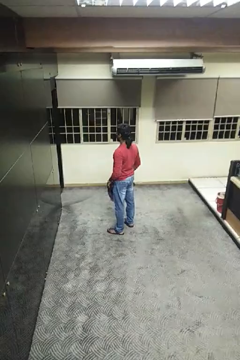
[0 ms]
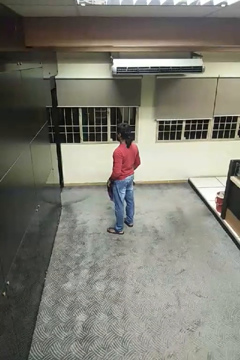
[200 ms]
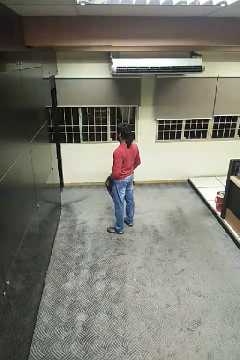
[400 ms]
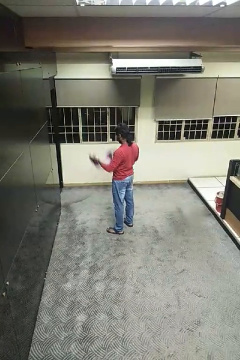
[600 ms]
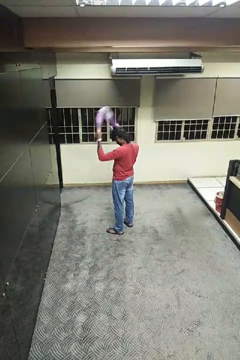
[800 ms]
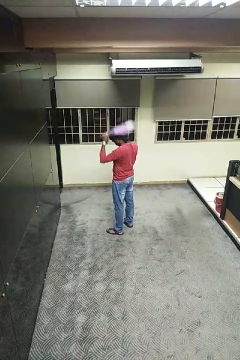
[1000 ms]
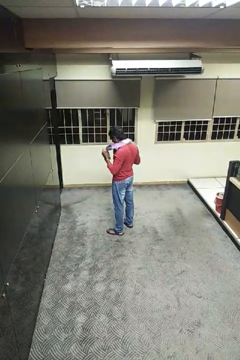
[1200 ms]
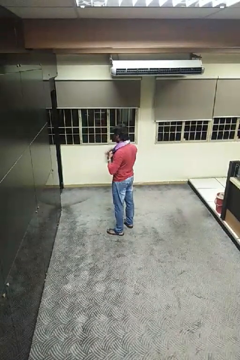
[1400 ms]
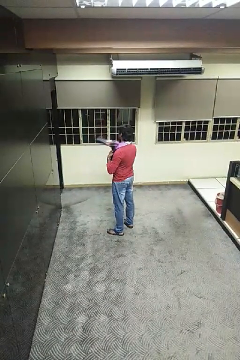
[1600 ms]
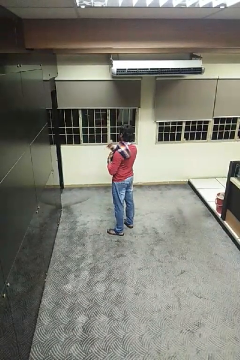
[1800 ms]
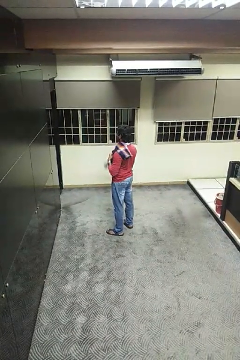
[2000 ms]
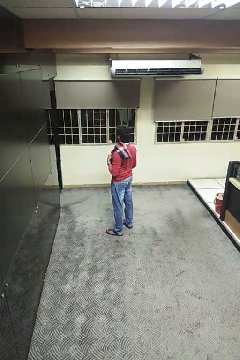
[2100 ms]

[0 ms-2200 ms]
person puts on scarf

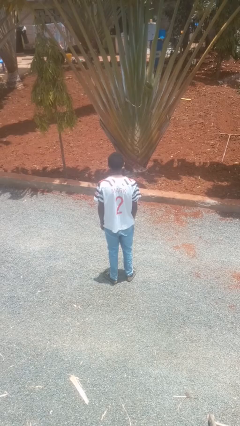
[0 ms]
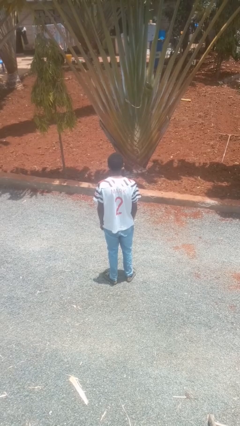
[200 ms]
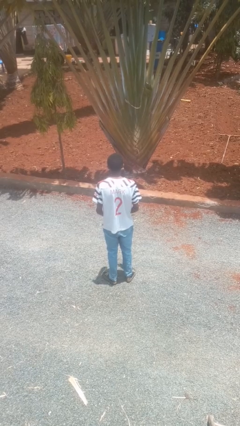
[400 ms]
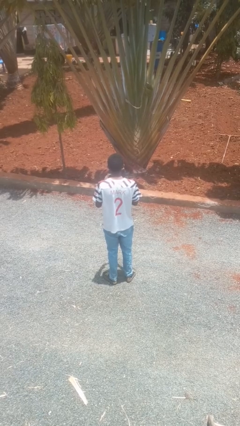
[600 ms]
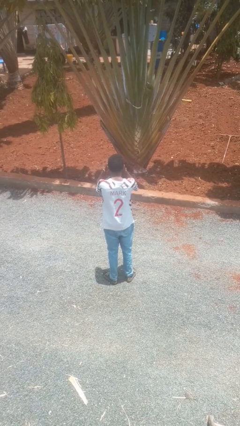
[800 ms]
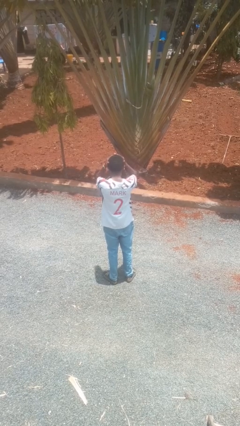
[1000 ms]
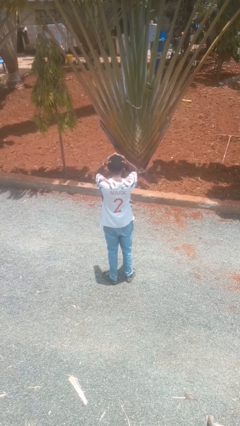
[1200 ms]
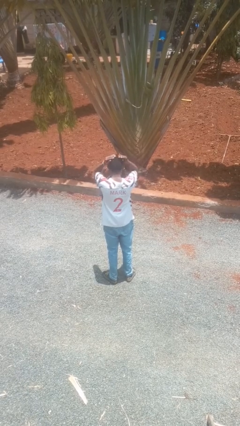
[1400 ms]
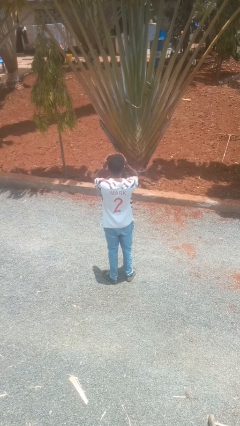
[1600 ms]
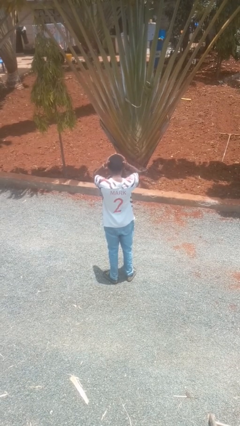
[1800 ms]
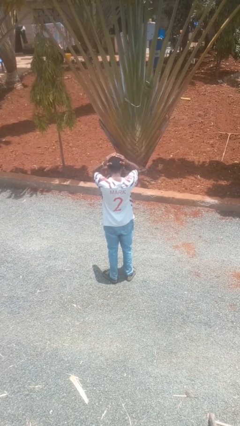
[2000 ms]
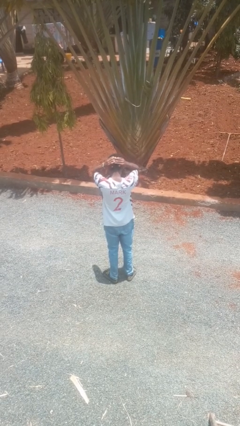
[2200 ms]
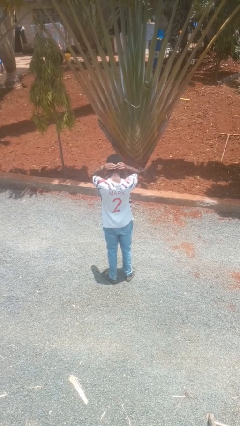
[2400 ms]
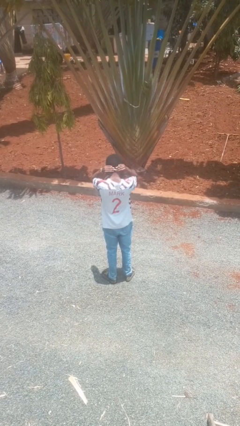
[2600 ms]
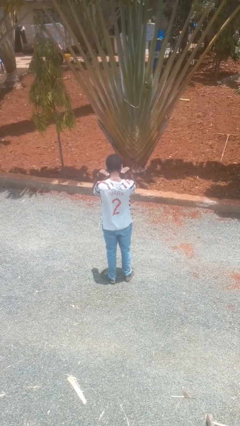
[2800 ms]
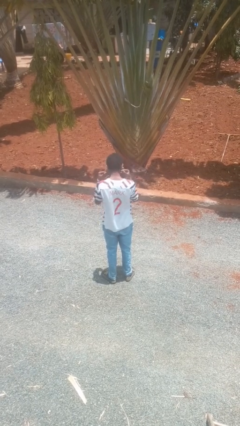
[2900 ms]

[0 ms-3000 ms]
person strokes hair

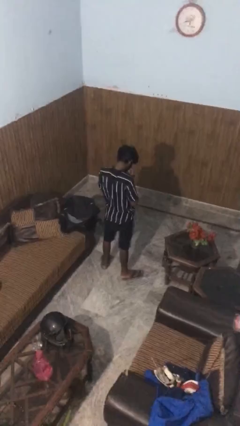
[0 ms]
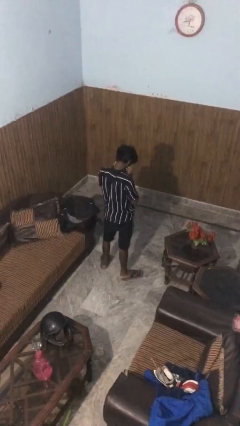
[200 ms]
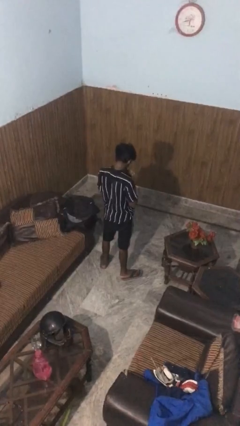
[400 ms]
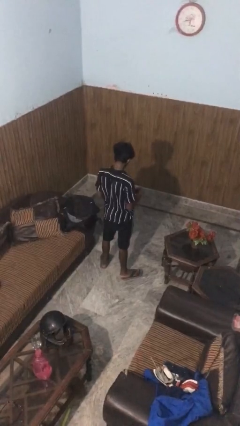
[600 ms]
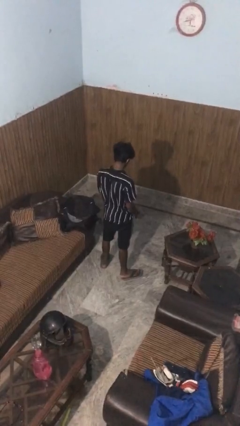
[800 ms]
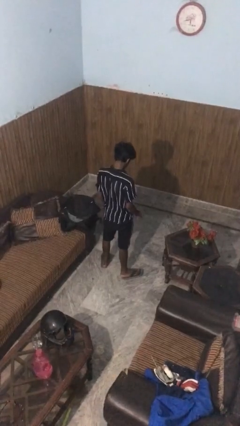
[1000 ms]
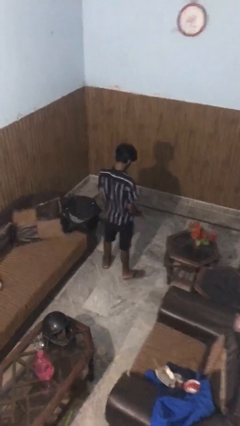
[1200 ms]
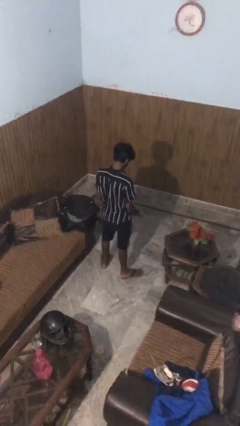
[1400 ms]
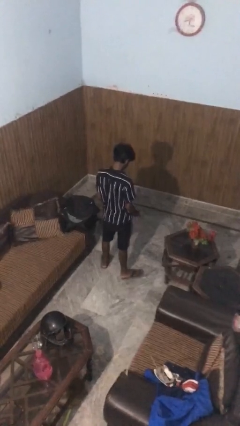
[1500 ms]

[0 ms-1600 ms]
person takes off facemask

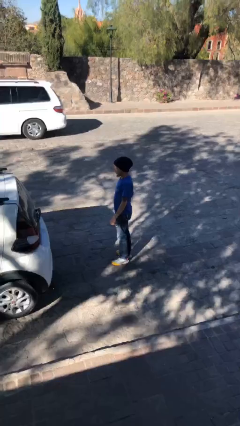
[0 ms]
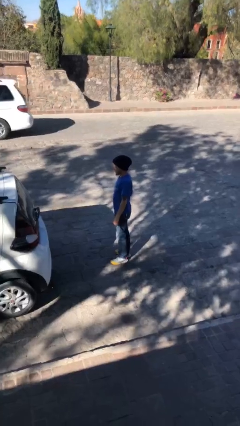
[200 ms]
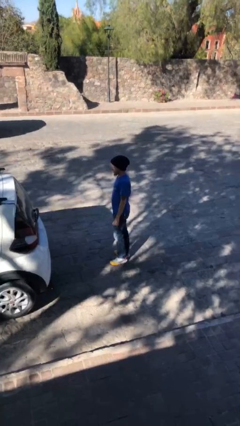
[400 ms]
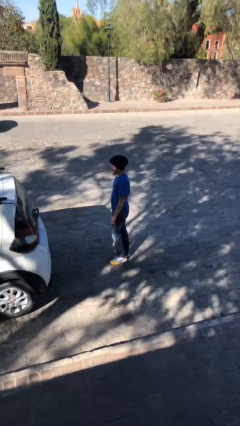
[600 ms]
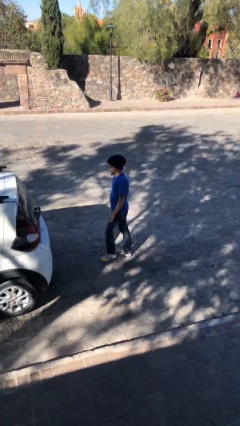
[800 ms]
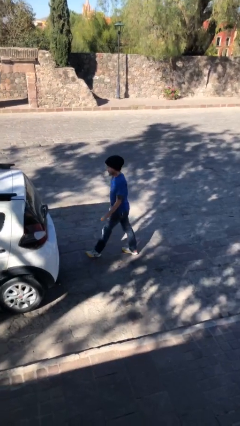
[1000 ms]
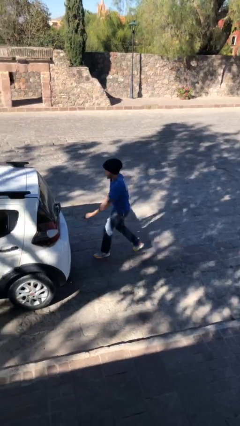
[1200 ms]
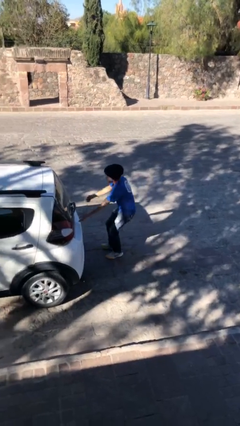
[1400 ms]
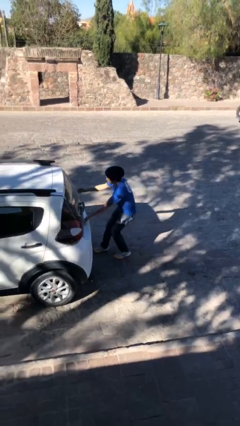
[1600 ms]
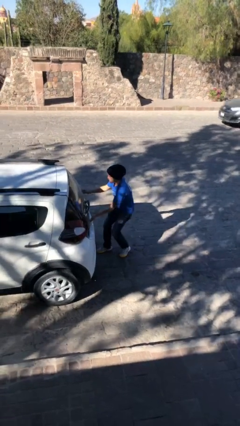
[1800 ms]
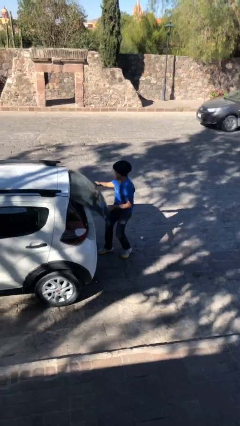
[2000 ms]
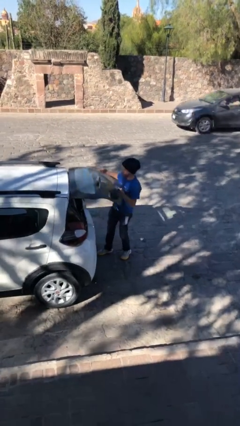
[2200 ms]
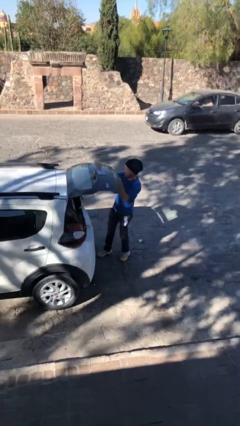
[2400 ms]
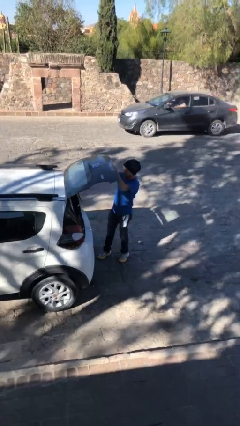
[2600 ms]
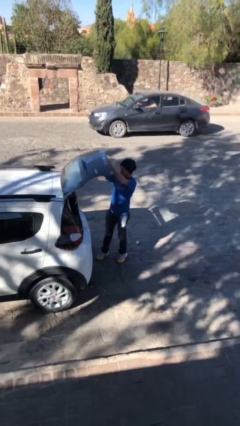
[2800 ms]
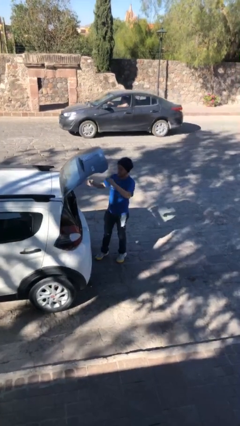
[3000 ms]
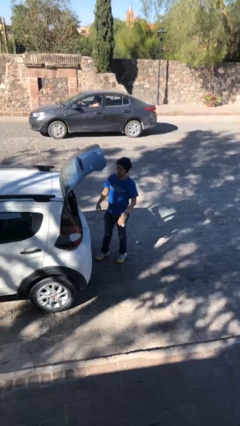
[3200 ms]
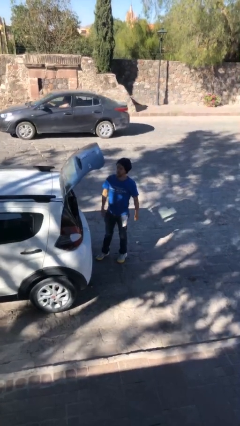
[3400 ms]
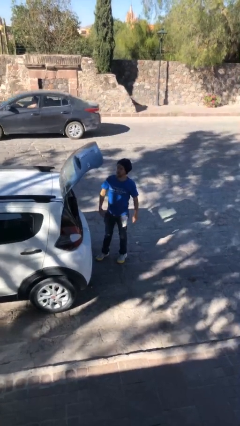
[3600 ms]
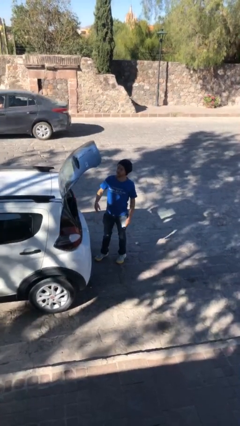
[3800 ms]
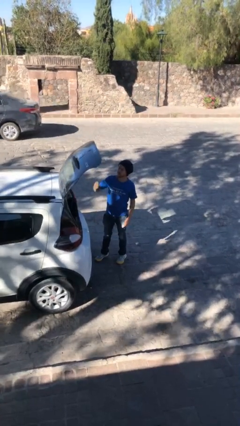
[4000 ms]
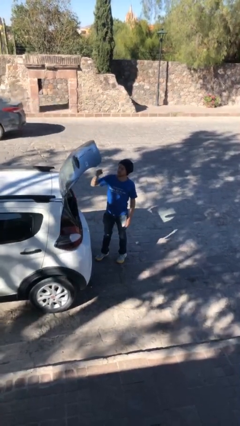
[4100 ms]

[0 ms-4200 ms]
person opens car trunk

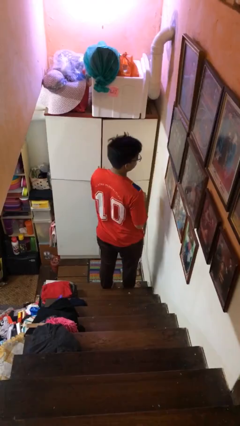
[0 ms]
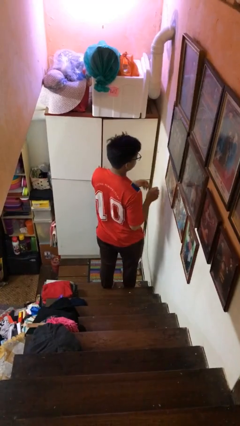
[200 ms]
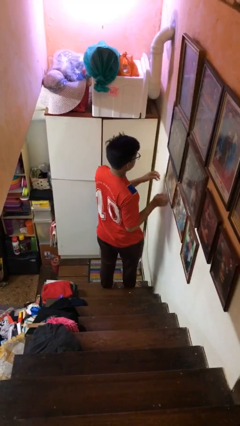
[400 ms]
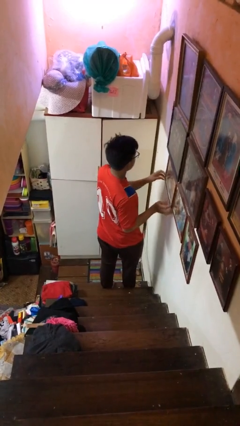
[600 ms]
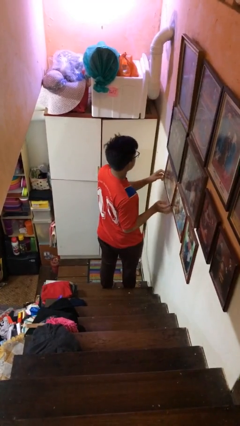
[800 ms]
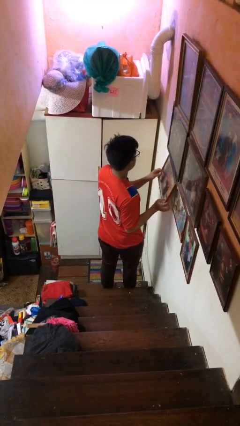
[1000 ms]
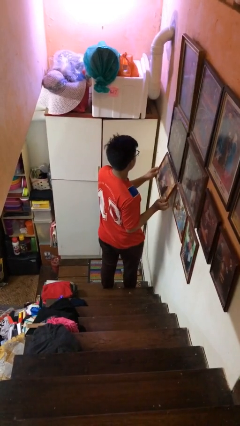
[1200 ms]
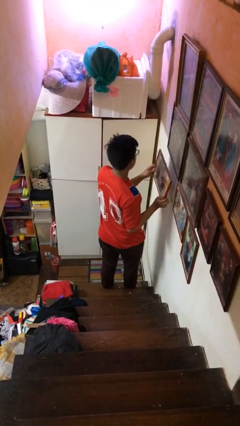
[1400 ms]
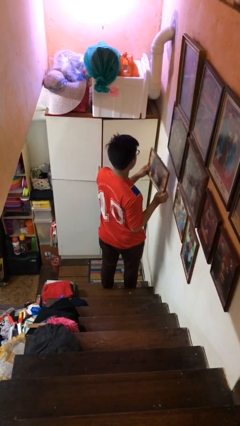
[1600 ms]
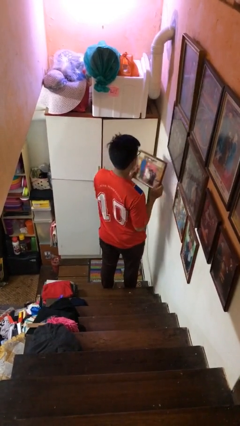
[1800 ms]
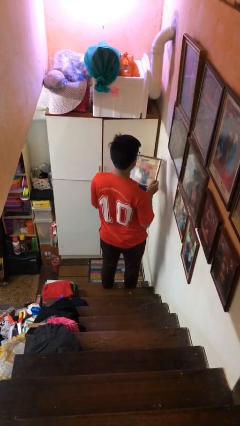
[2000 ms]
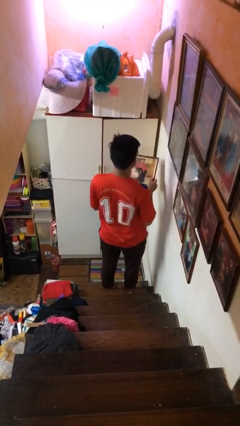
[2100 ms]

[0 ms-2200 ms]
person takes down picture frame

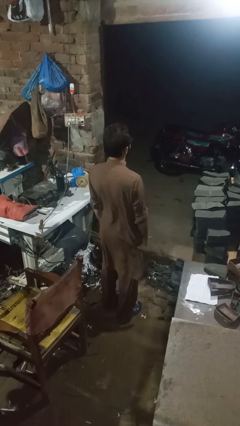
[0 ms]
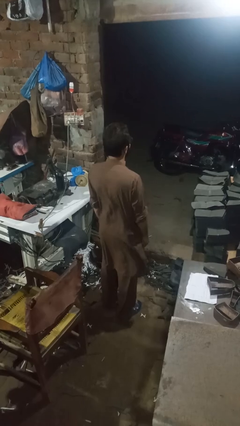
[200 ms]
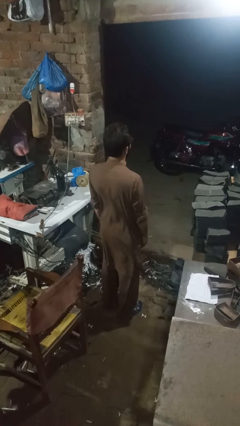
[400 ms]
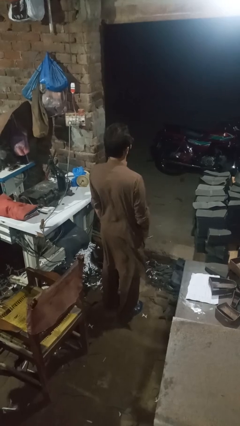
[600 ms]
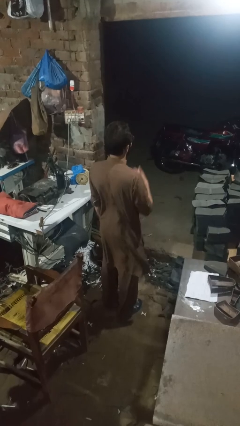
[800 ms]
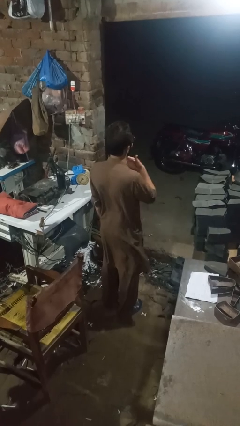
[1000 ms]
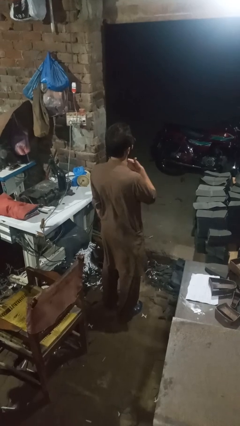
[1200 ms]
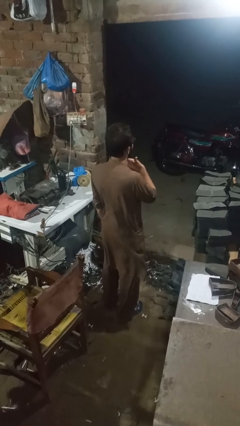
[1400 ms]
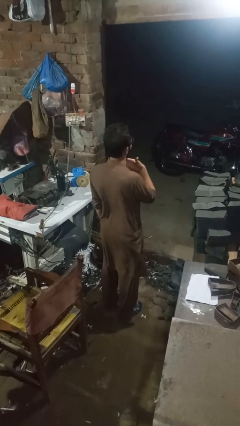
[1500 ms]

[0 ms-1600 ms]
person rubs neck

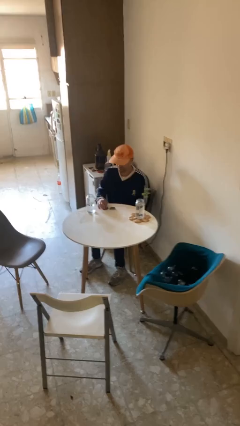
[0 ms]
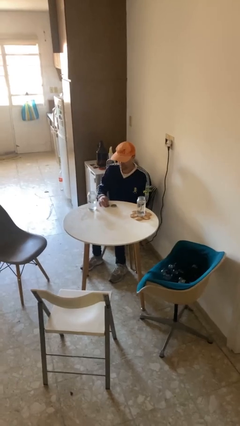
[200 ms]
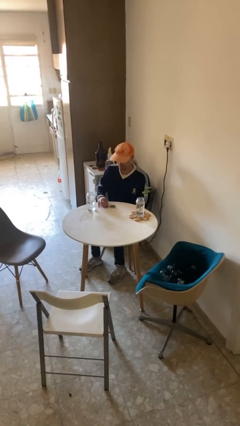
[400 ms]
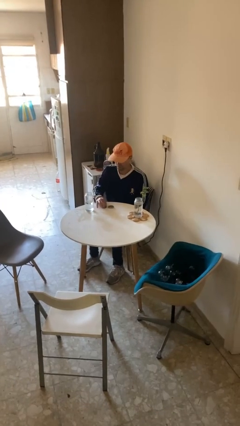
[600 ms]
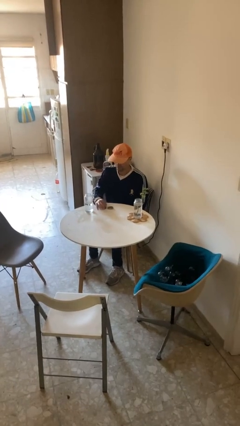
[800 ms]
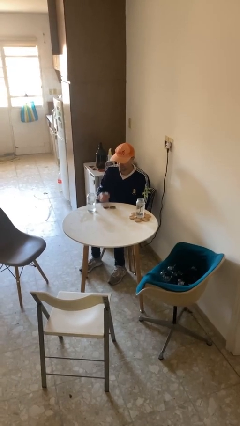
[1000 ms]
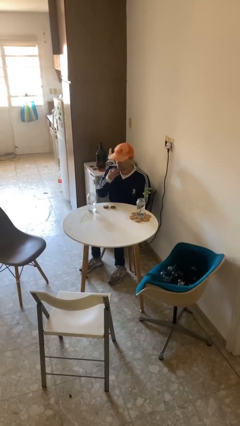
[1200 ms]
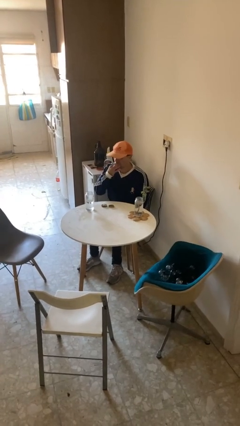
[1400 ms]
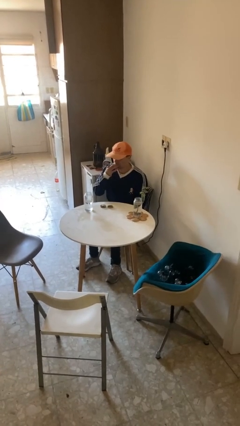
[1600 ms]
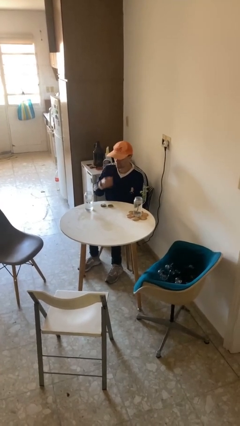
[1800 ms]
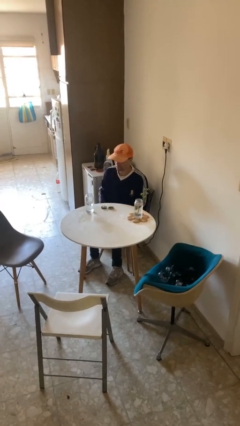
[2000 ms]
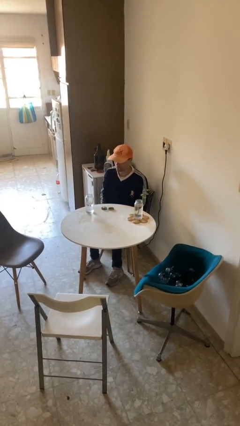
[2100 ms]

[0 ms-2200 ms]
person takes medicine pills

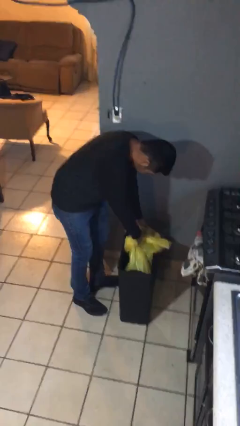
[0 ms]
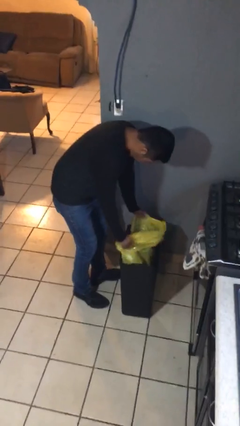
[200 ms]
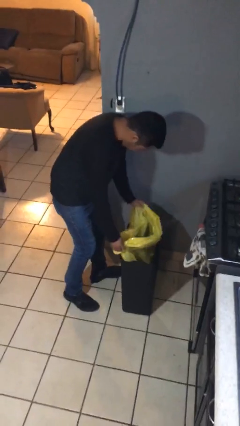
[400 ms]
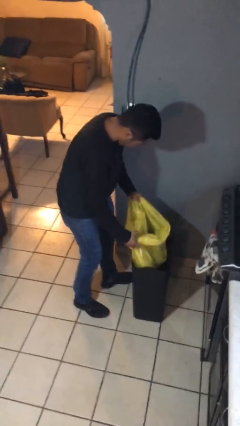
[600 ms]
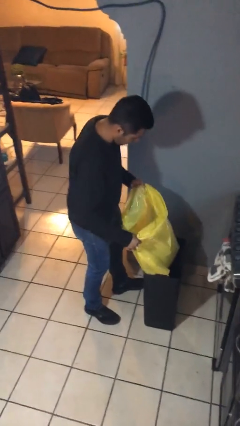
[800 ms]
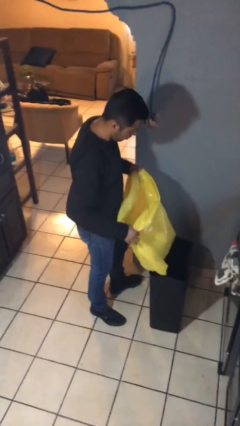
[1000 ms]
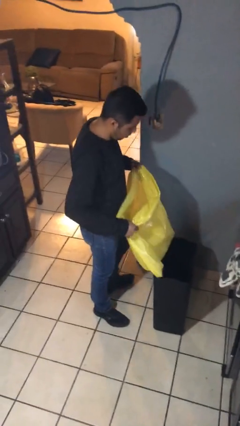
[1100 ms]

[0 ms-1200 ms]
person removes trashbag from trashcan
